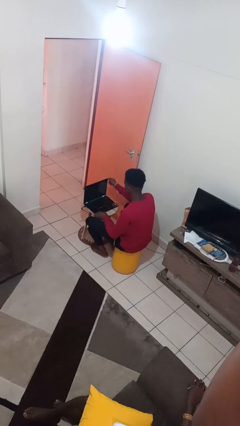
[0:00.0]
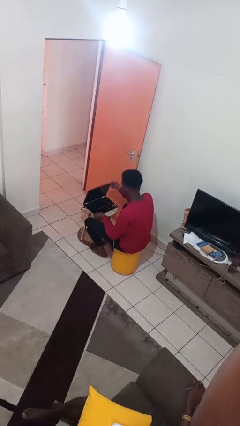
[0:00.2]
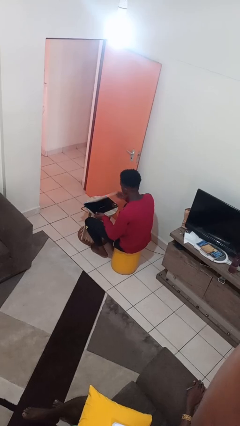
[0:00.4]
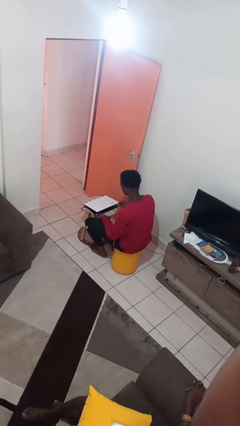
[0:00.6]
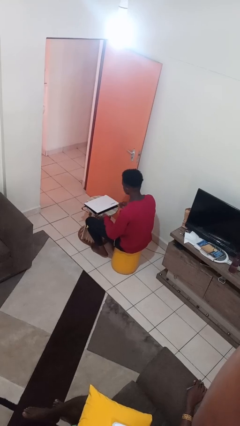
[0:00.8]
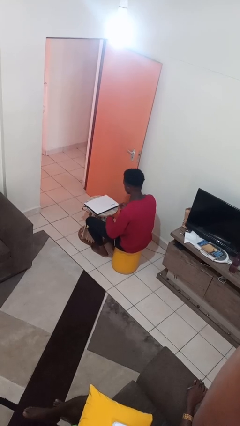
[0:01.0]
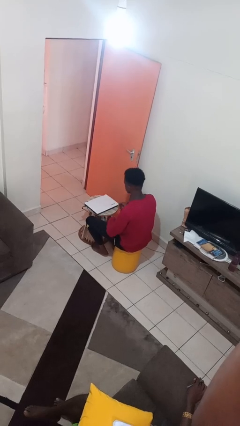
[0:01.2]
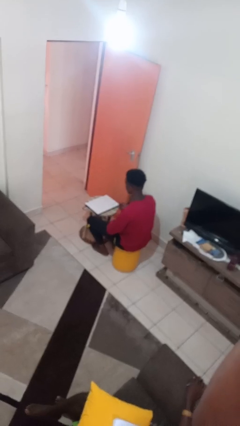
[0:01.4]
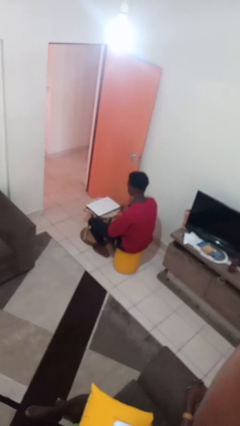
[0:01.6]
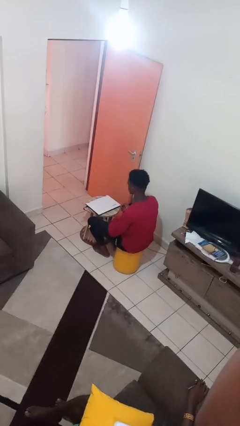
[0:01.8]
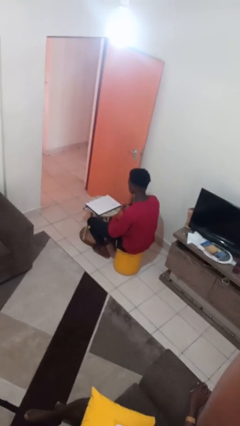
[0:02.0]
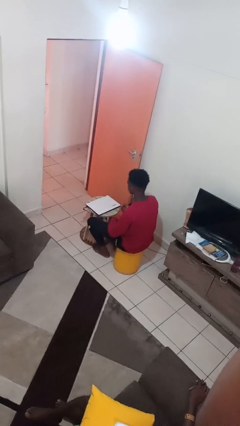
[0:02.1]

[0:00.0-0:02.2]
person closes laptop

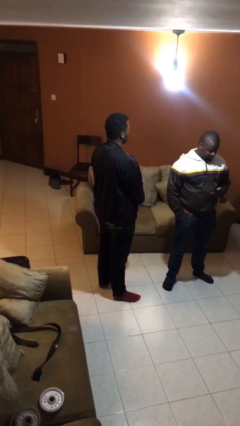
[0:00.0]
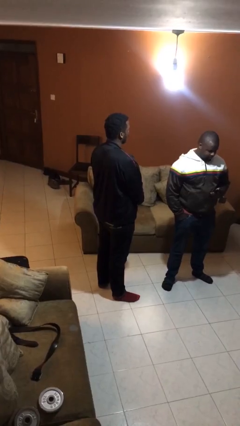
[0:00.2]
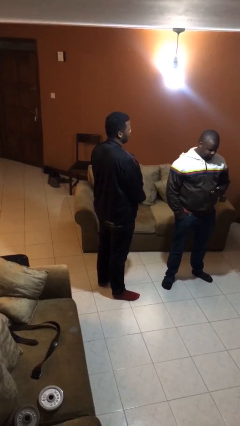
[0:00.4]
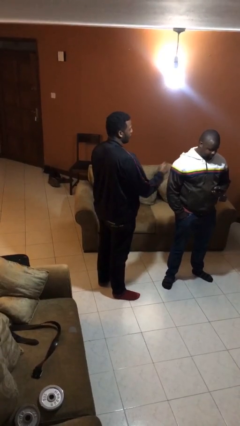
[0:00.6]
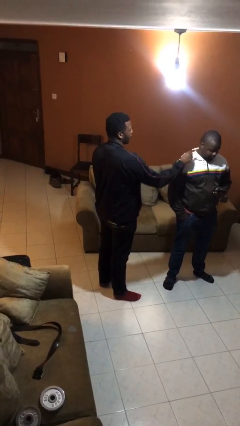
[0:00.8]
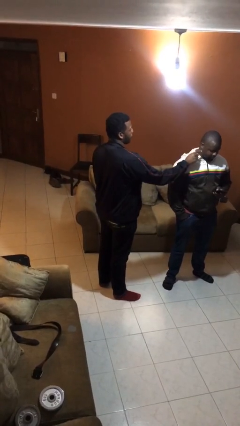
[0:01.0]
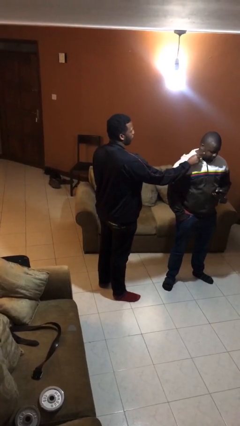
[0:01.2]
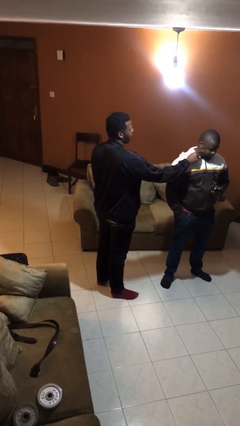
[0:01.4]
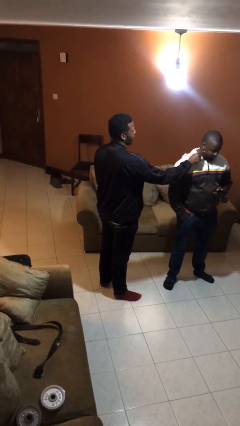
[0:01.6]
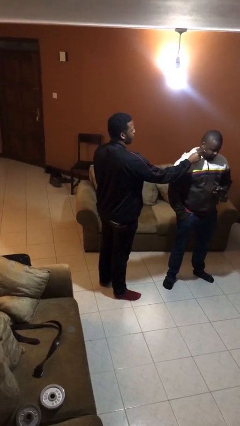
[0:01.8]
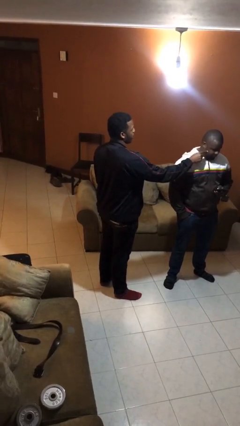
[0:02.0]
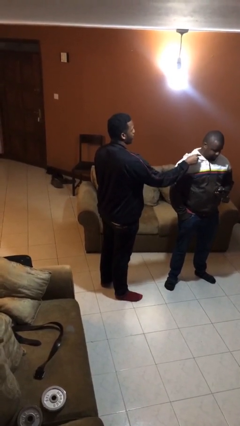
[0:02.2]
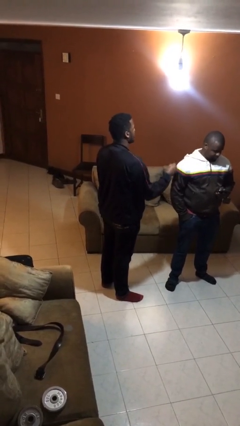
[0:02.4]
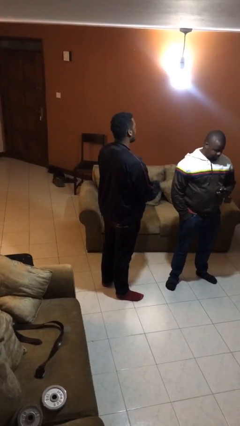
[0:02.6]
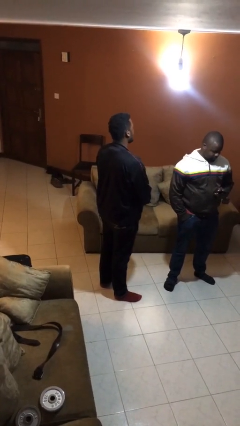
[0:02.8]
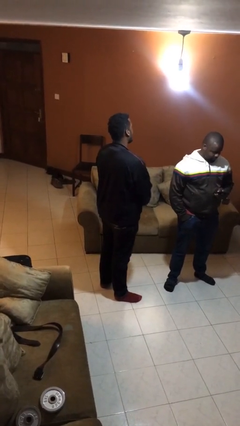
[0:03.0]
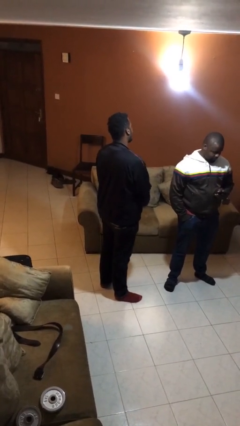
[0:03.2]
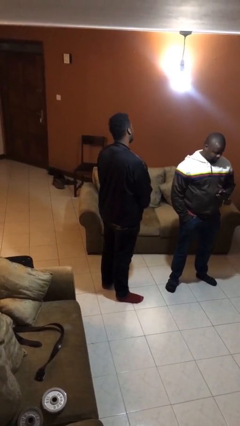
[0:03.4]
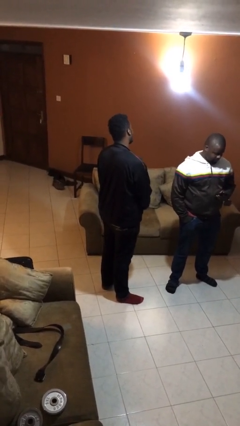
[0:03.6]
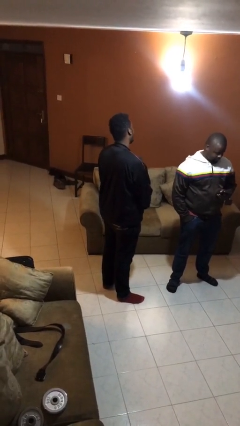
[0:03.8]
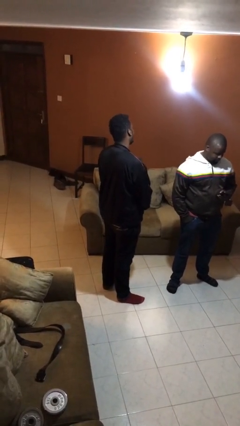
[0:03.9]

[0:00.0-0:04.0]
person touches face of person

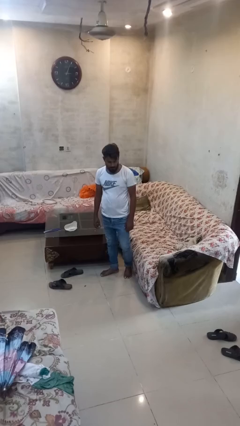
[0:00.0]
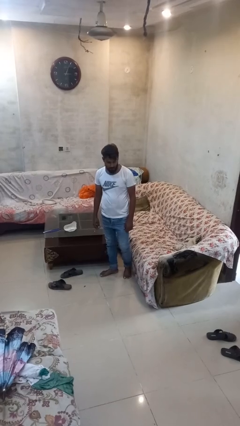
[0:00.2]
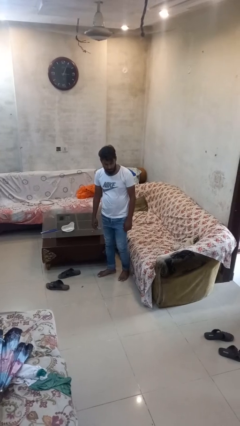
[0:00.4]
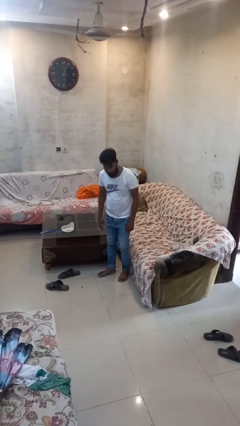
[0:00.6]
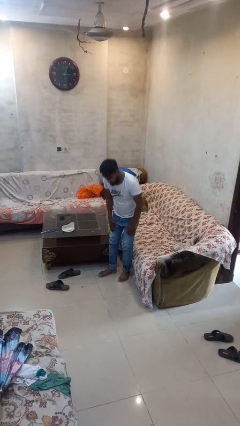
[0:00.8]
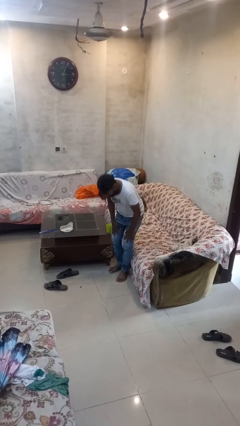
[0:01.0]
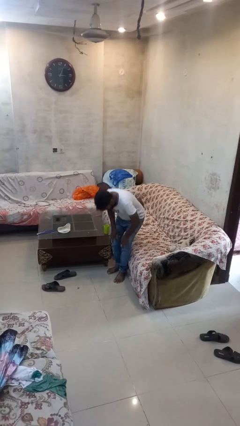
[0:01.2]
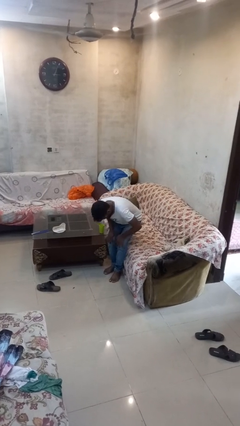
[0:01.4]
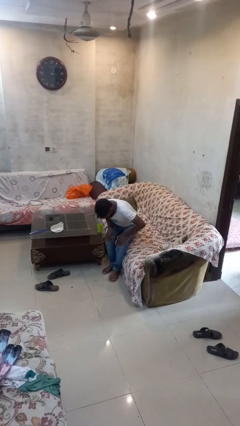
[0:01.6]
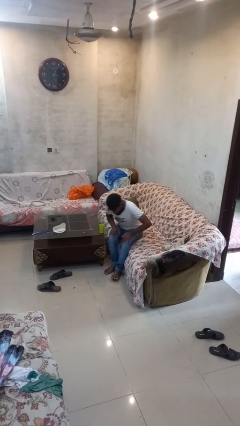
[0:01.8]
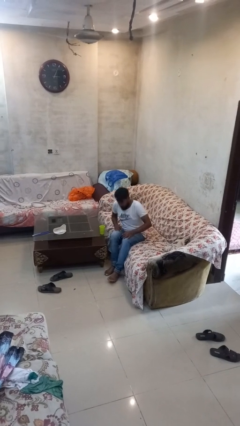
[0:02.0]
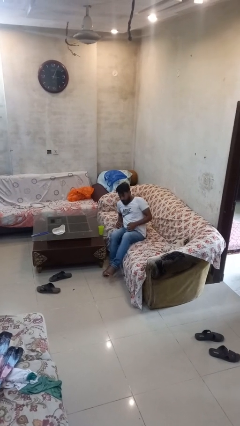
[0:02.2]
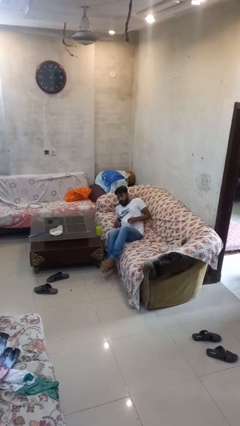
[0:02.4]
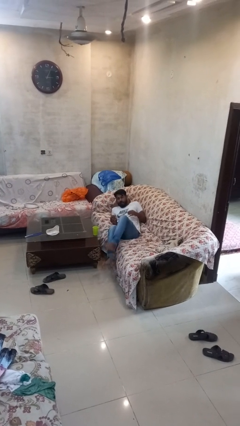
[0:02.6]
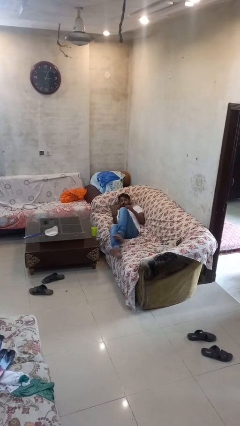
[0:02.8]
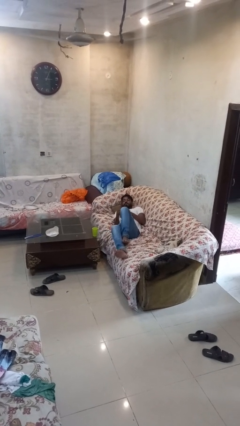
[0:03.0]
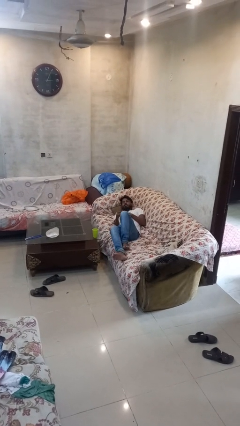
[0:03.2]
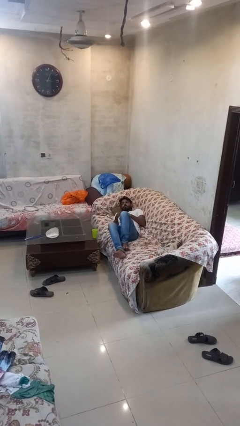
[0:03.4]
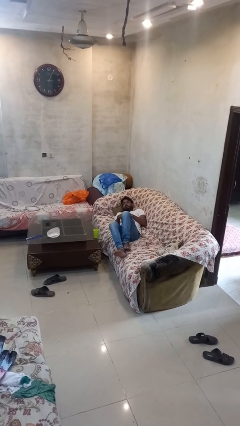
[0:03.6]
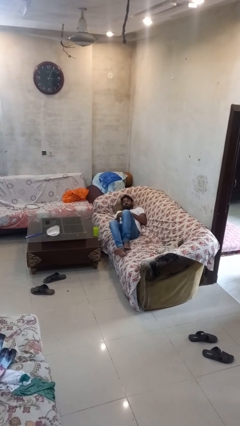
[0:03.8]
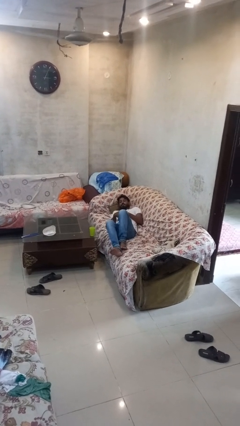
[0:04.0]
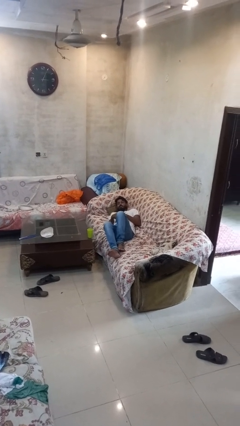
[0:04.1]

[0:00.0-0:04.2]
person lies down on couch

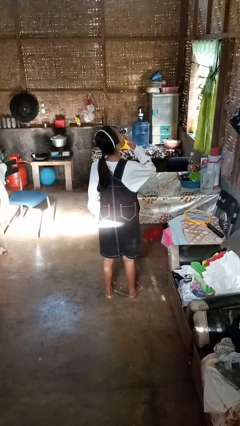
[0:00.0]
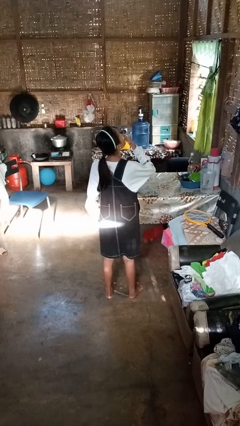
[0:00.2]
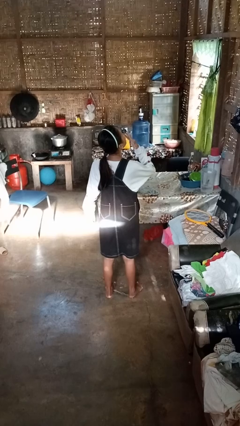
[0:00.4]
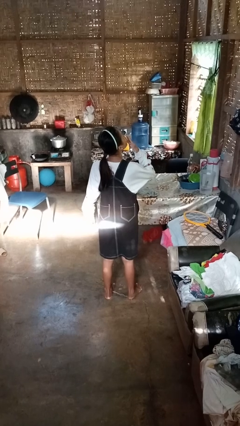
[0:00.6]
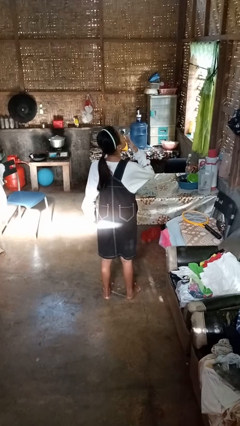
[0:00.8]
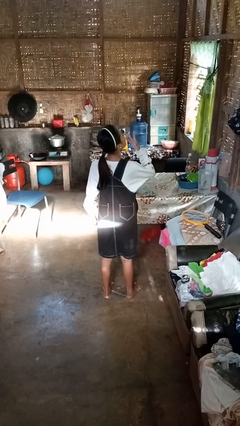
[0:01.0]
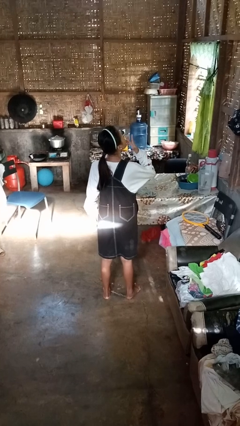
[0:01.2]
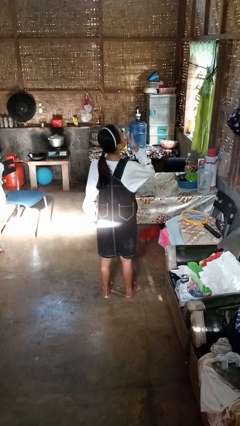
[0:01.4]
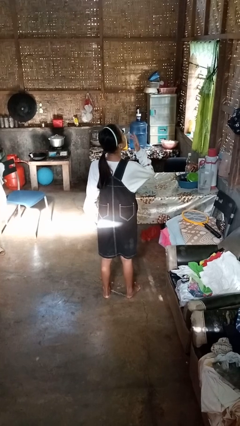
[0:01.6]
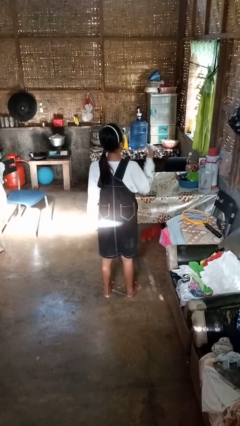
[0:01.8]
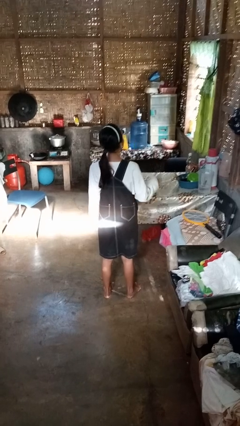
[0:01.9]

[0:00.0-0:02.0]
person licks fingers

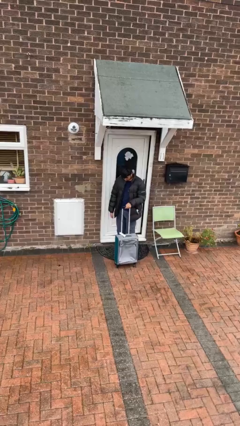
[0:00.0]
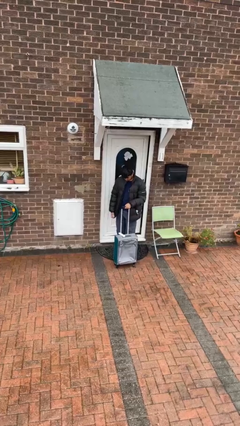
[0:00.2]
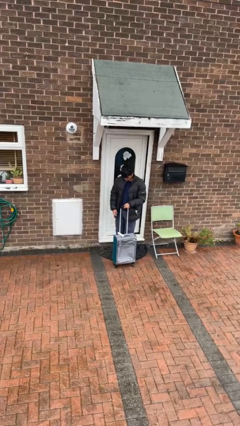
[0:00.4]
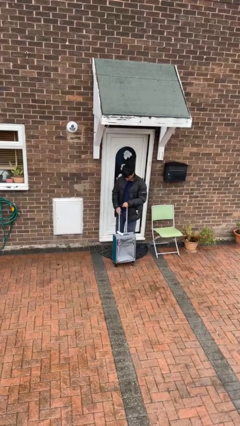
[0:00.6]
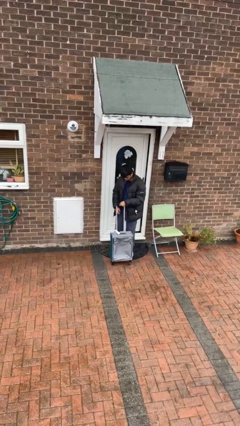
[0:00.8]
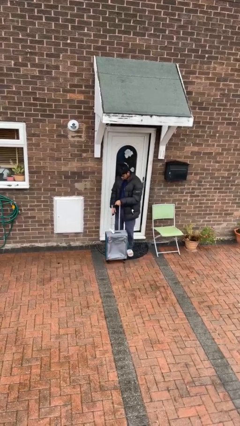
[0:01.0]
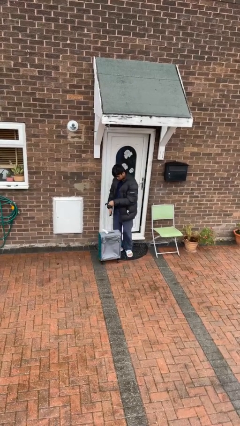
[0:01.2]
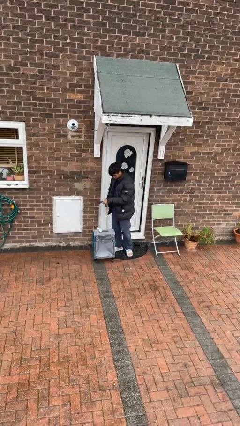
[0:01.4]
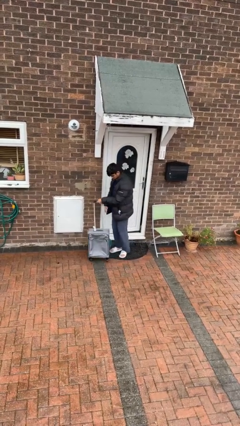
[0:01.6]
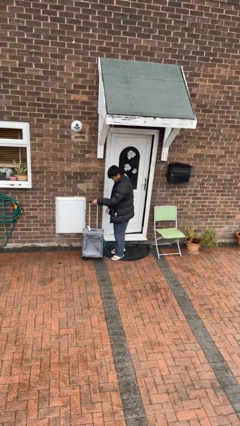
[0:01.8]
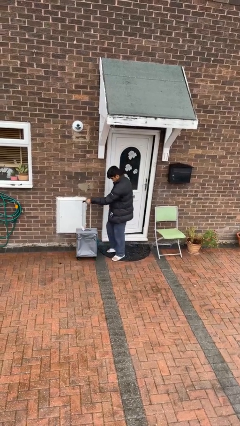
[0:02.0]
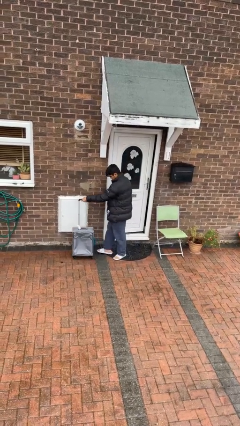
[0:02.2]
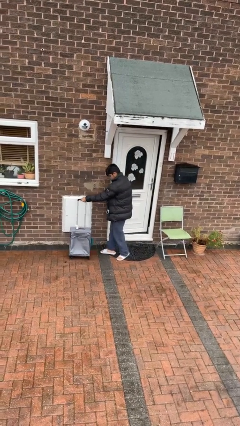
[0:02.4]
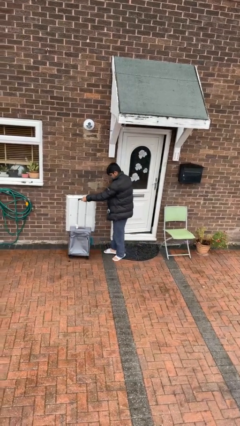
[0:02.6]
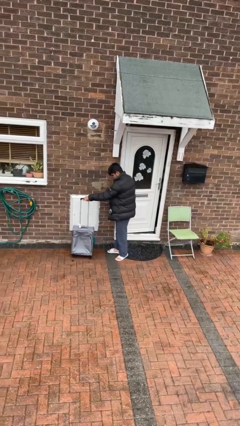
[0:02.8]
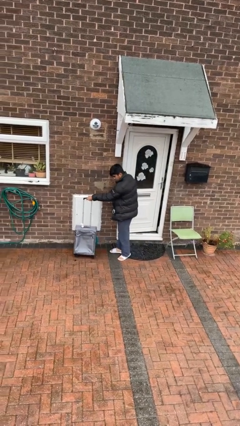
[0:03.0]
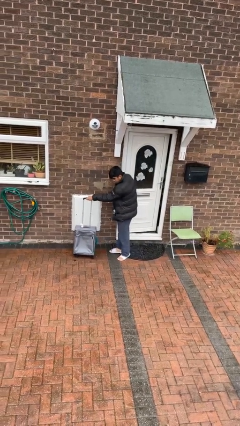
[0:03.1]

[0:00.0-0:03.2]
person pushes wheeled cart

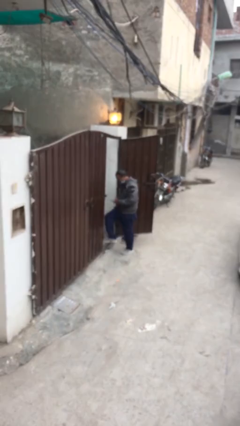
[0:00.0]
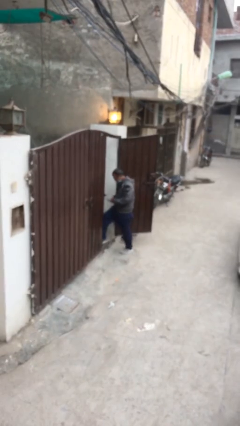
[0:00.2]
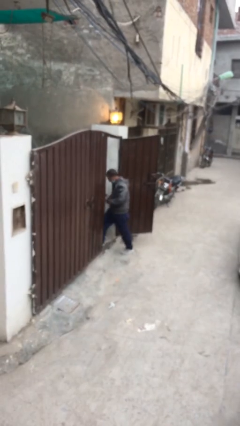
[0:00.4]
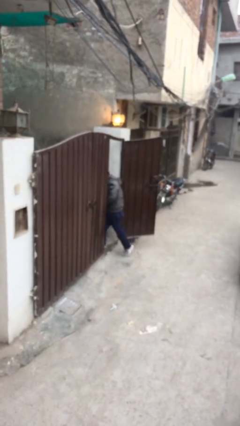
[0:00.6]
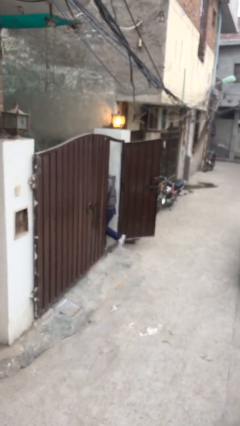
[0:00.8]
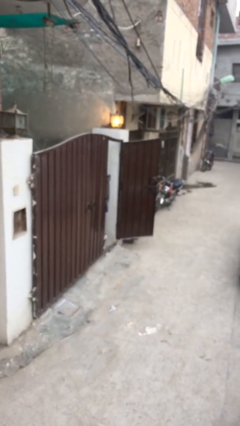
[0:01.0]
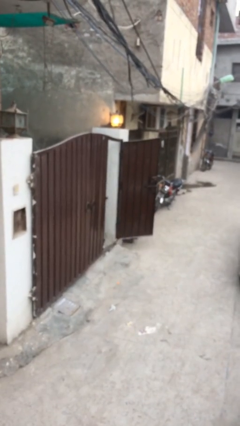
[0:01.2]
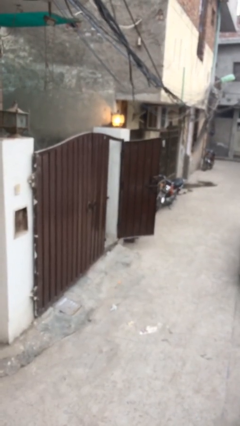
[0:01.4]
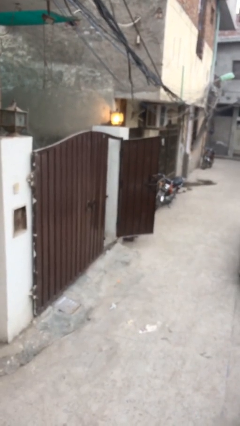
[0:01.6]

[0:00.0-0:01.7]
person exits scene through structure
